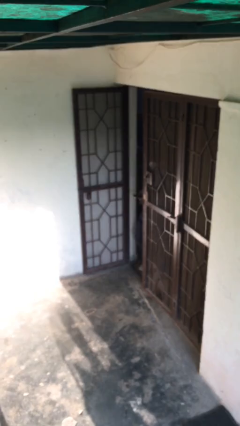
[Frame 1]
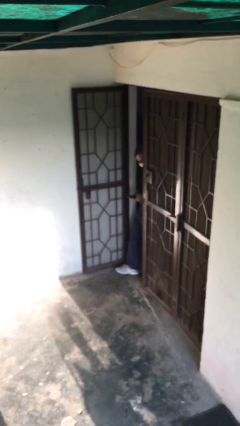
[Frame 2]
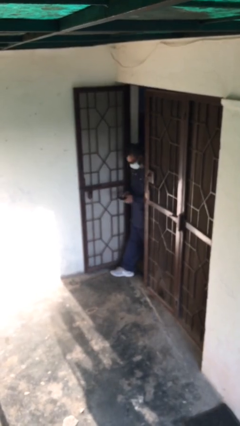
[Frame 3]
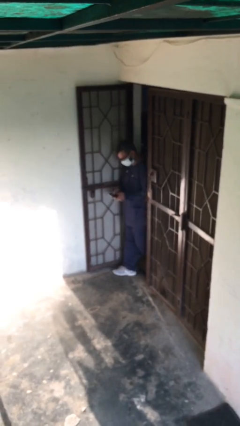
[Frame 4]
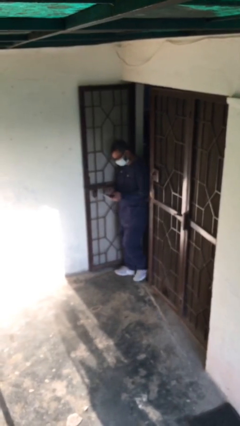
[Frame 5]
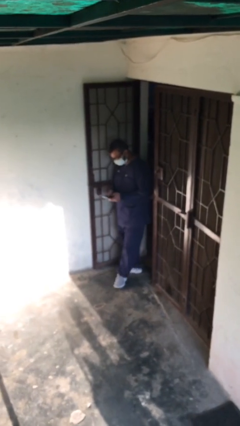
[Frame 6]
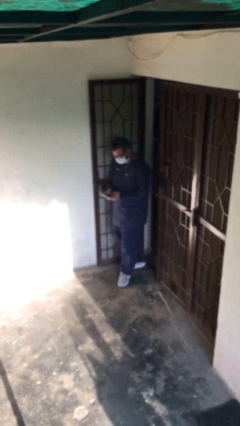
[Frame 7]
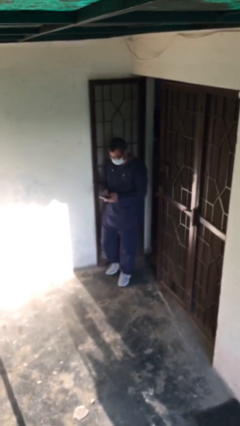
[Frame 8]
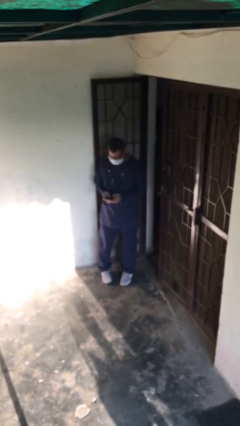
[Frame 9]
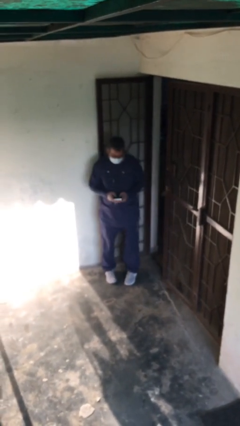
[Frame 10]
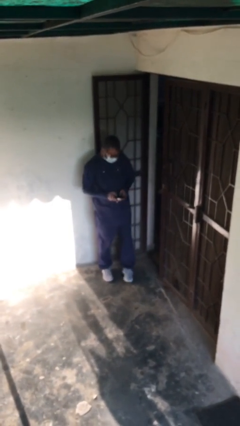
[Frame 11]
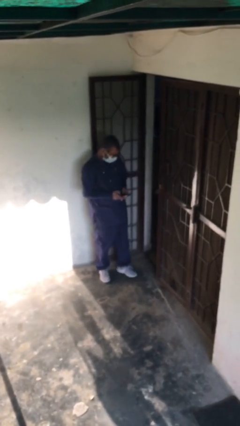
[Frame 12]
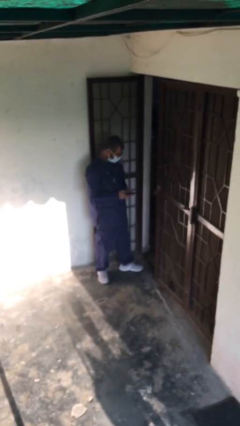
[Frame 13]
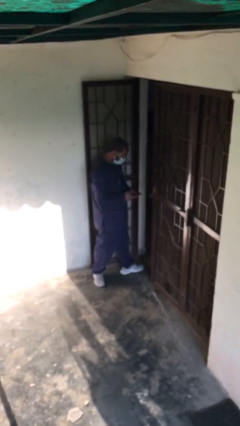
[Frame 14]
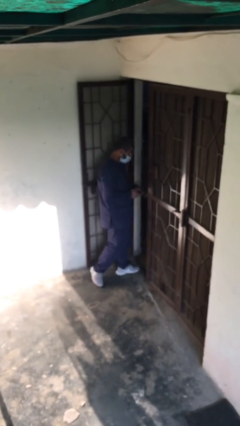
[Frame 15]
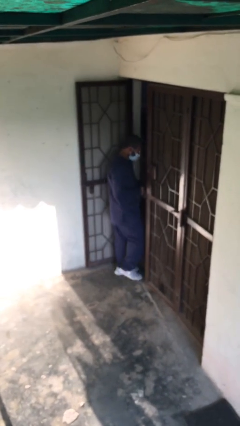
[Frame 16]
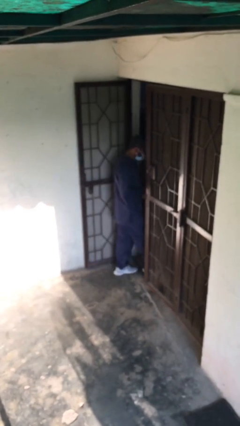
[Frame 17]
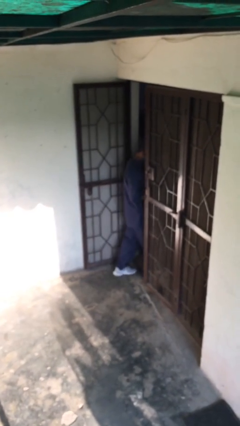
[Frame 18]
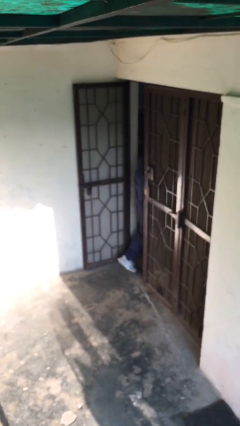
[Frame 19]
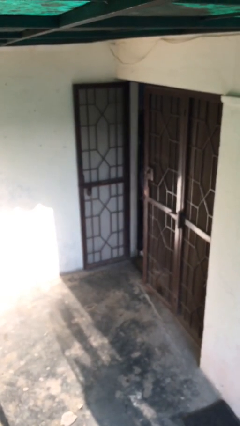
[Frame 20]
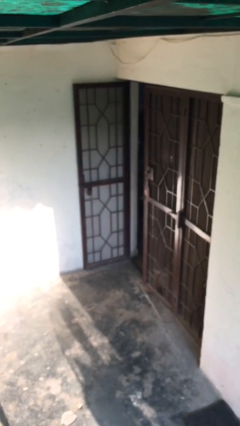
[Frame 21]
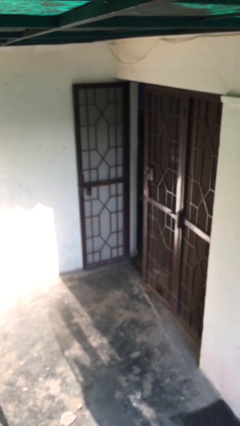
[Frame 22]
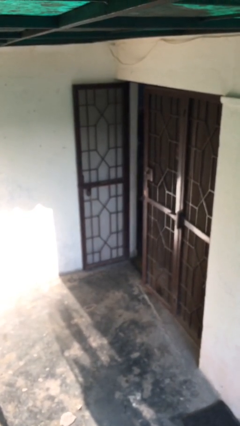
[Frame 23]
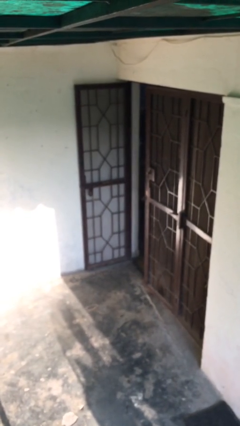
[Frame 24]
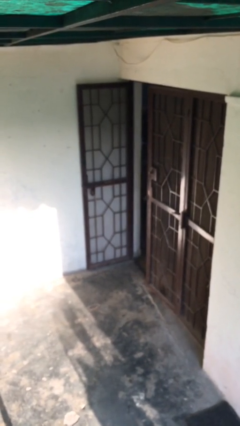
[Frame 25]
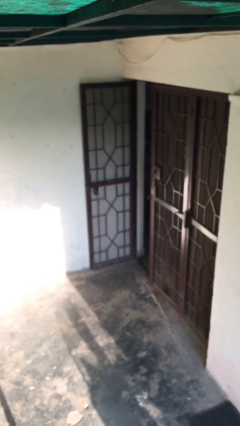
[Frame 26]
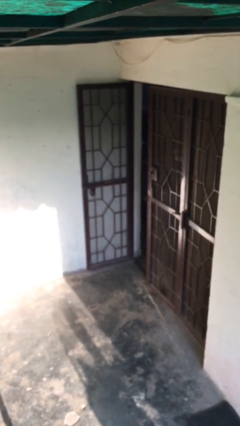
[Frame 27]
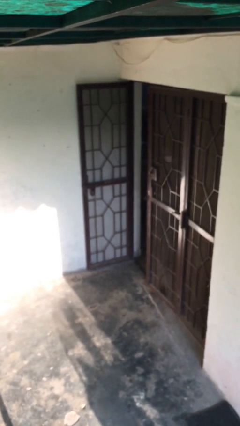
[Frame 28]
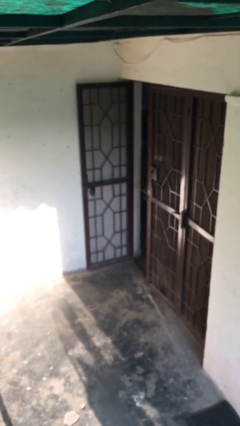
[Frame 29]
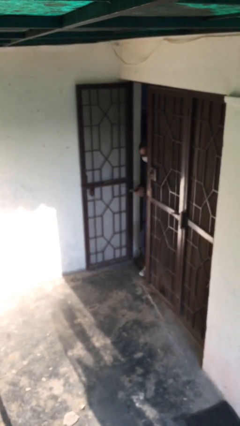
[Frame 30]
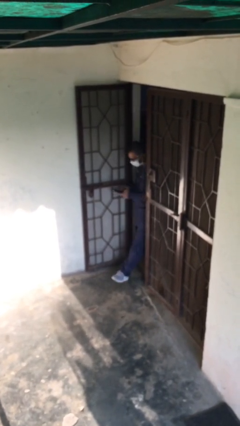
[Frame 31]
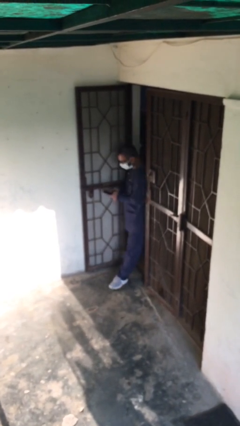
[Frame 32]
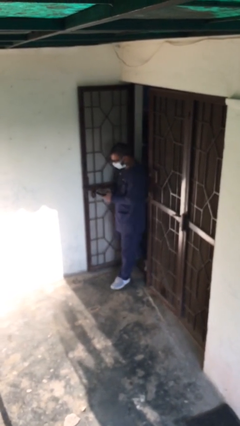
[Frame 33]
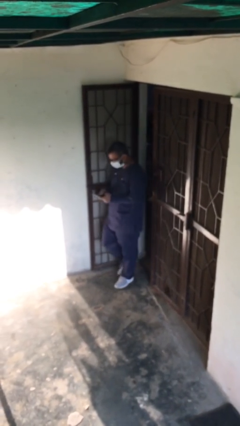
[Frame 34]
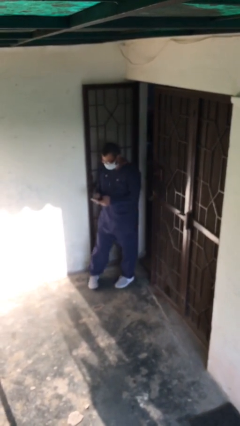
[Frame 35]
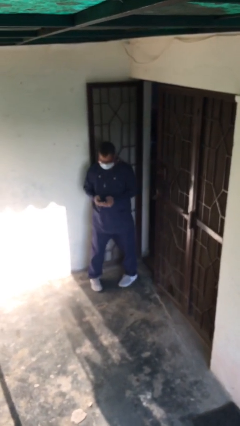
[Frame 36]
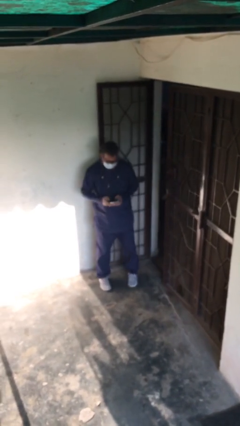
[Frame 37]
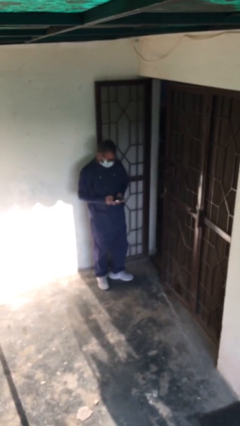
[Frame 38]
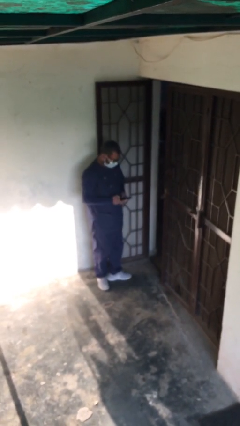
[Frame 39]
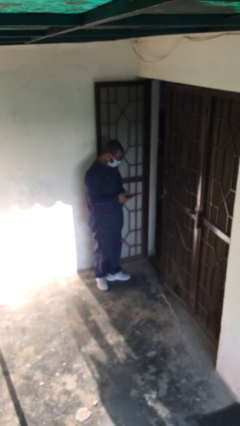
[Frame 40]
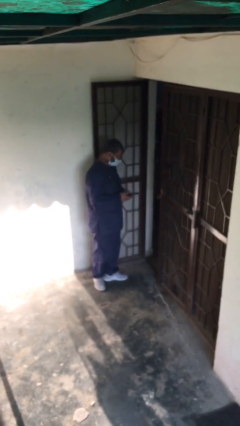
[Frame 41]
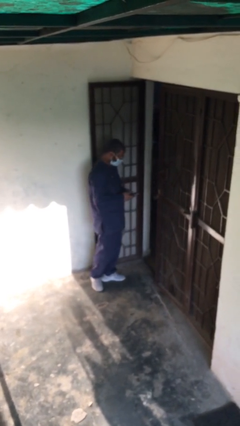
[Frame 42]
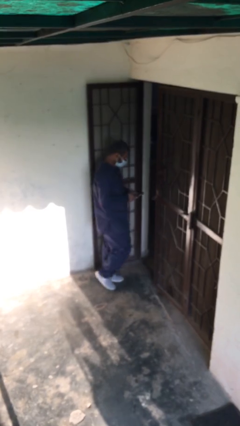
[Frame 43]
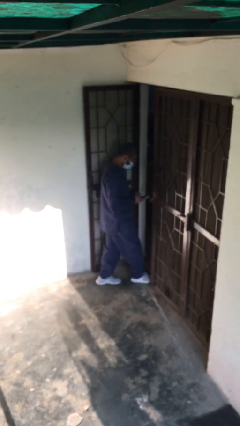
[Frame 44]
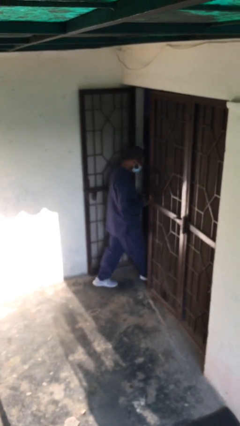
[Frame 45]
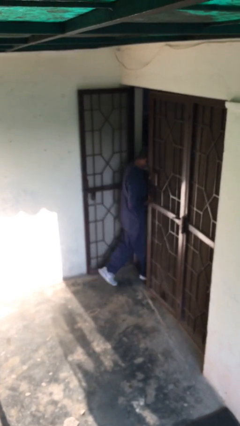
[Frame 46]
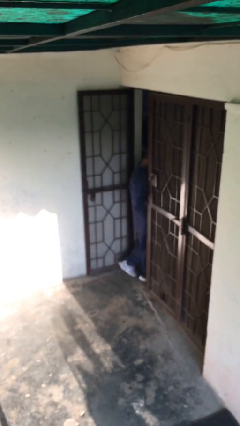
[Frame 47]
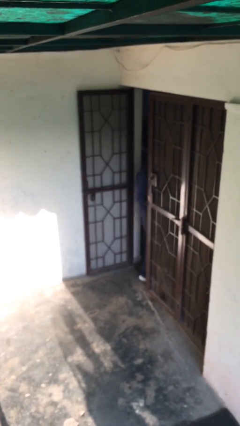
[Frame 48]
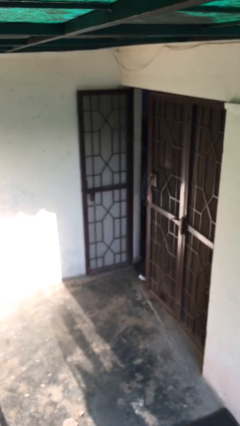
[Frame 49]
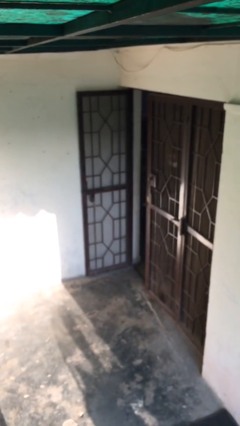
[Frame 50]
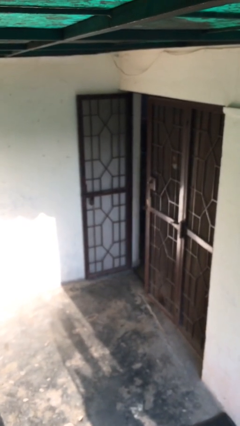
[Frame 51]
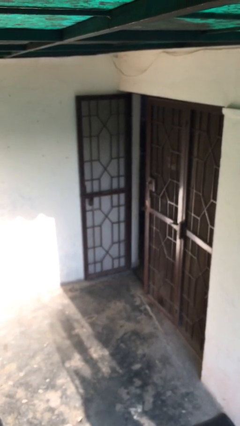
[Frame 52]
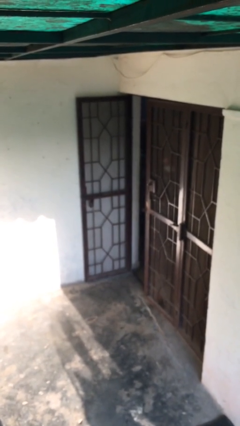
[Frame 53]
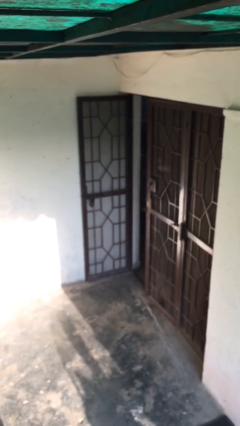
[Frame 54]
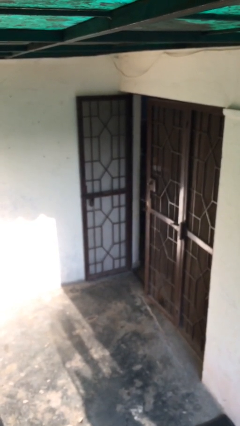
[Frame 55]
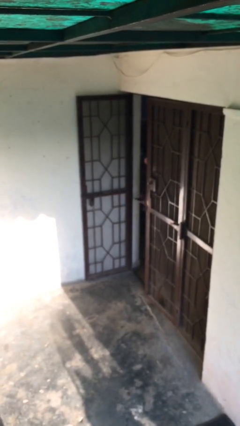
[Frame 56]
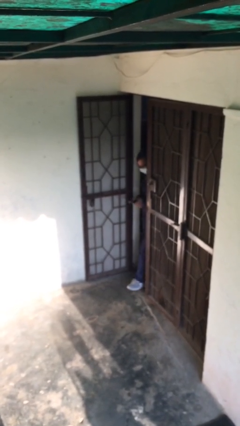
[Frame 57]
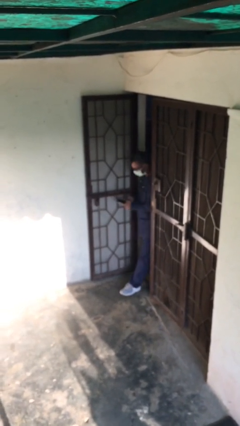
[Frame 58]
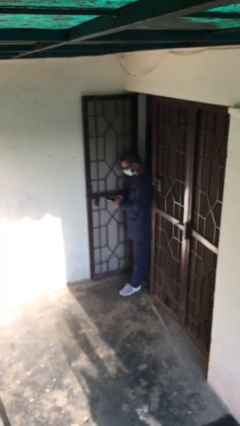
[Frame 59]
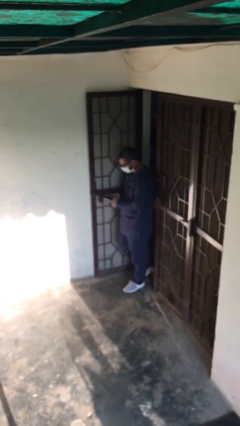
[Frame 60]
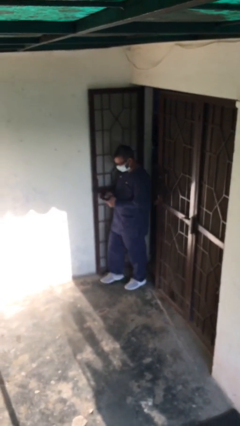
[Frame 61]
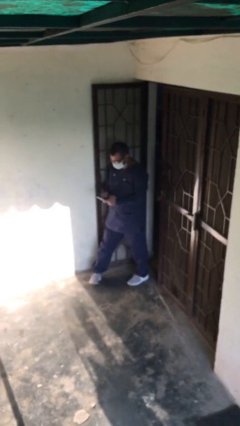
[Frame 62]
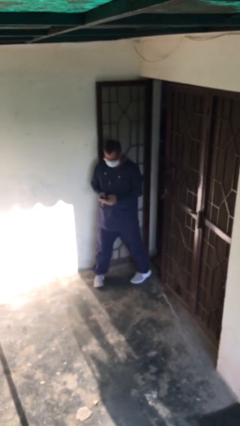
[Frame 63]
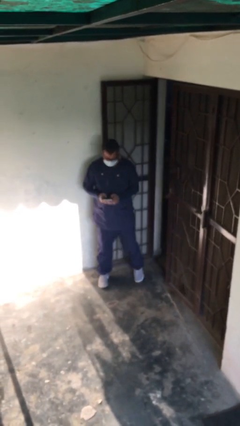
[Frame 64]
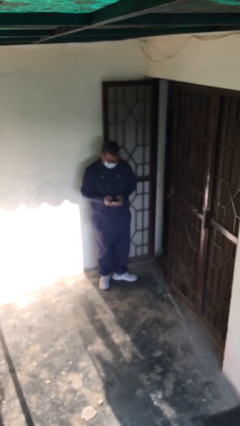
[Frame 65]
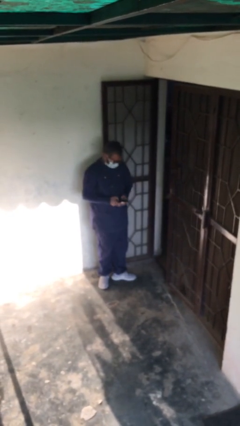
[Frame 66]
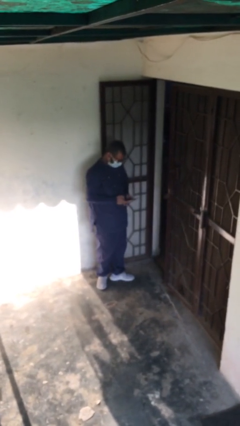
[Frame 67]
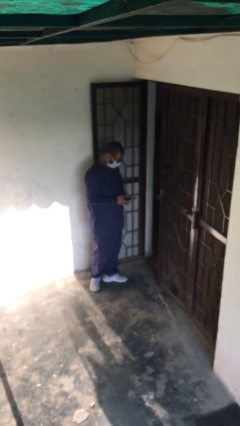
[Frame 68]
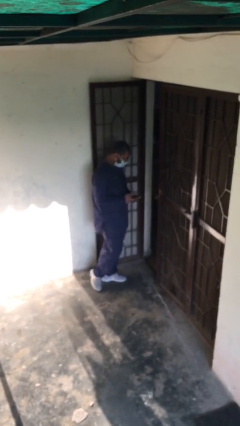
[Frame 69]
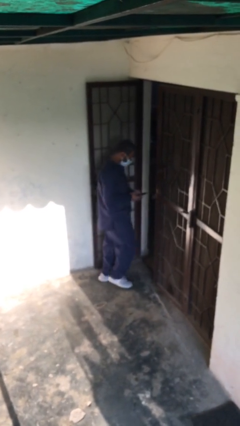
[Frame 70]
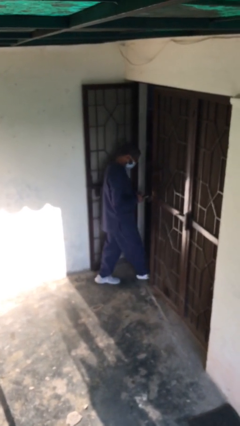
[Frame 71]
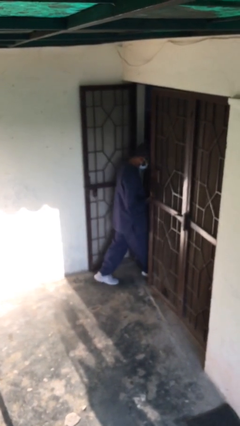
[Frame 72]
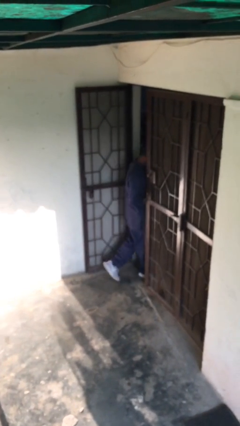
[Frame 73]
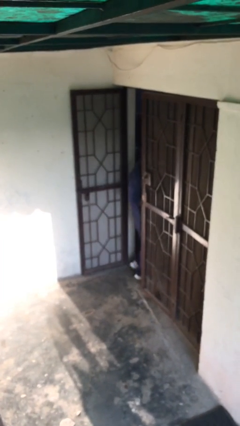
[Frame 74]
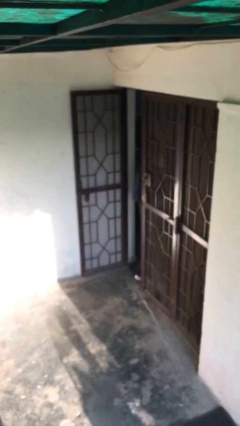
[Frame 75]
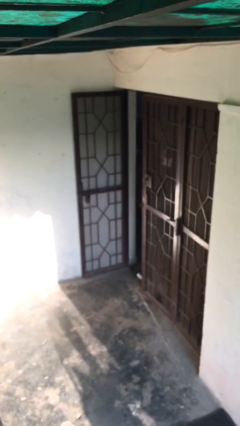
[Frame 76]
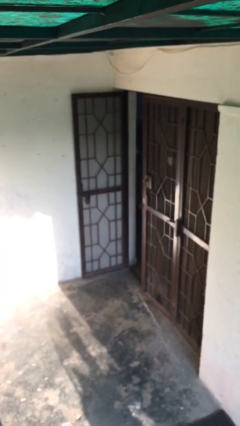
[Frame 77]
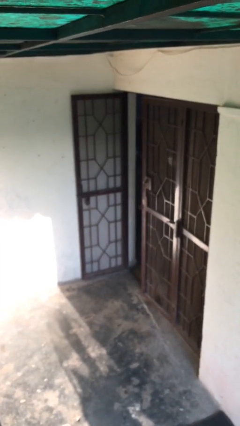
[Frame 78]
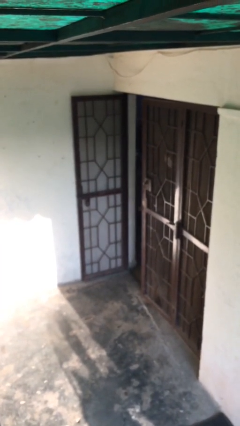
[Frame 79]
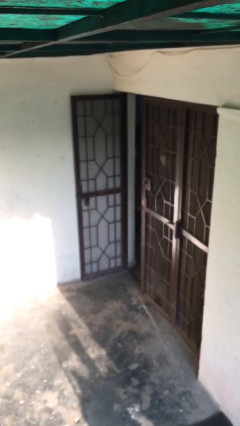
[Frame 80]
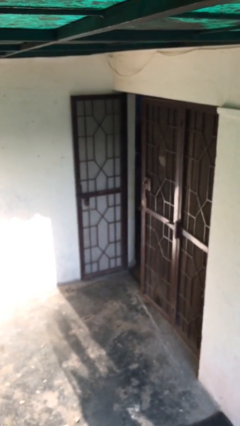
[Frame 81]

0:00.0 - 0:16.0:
person texts on phone

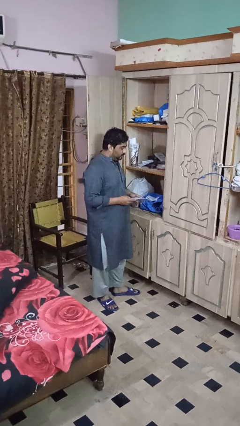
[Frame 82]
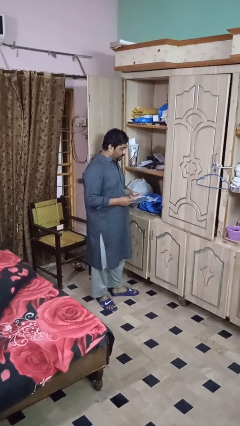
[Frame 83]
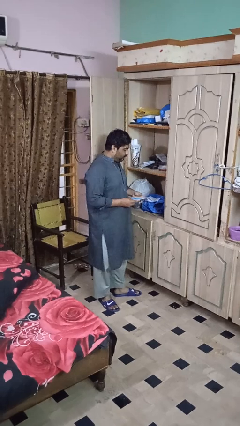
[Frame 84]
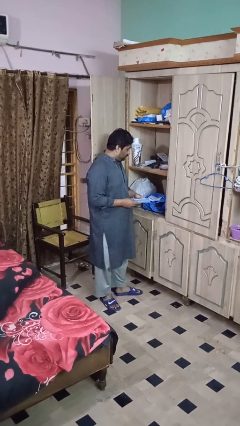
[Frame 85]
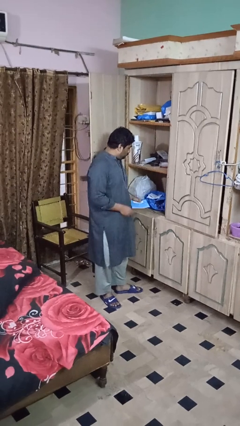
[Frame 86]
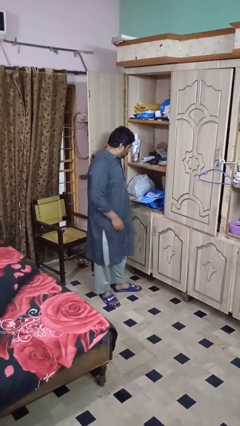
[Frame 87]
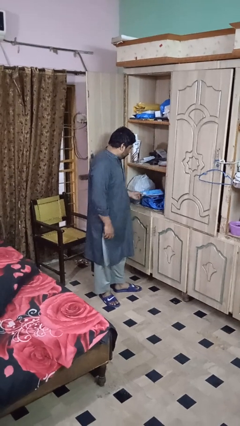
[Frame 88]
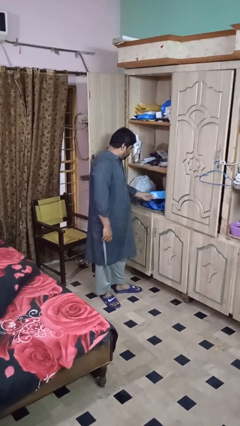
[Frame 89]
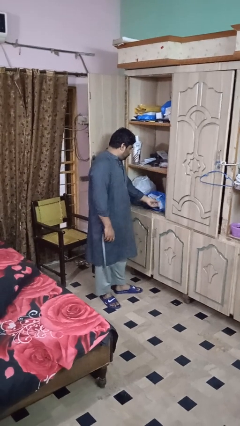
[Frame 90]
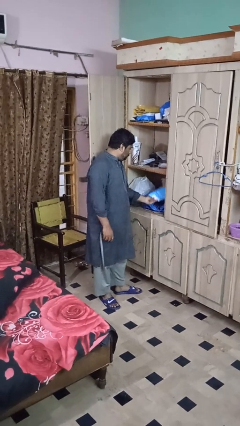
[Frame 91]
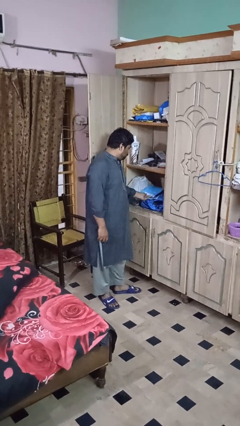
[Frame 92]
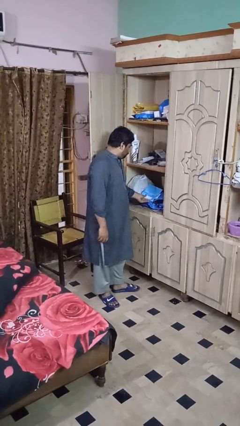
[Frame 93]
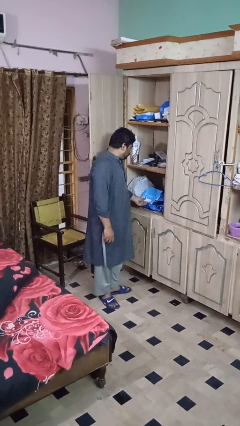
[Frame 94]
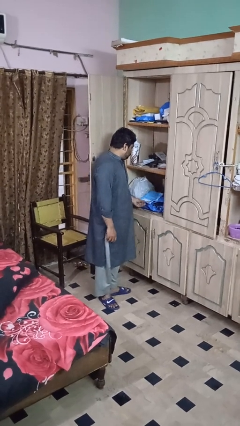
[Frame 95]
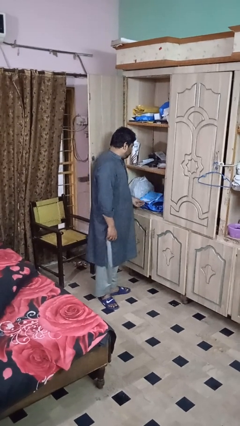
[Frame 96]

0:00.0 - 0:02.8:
person puts down object on shelf
